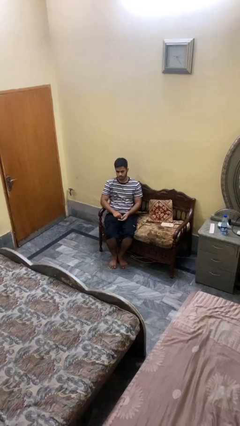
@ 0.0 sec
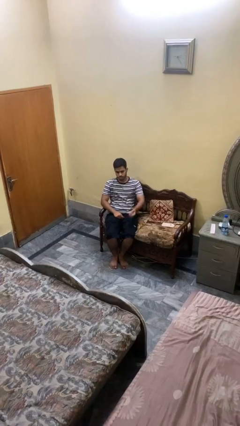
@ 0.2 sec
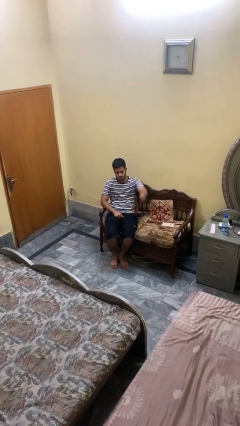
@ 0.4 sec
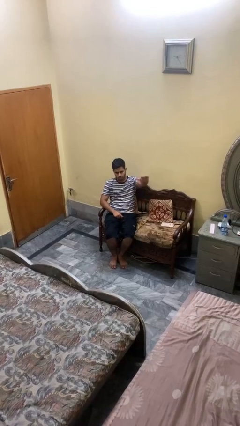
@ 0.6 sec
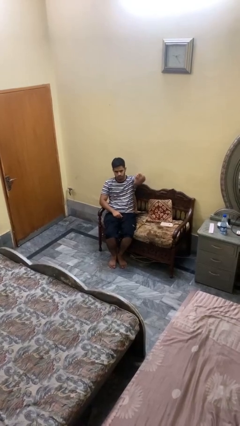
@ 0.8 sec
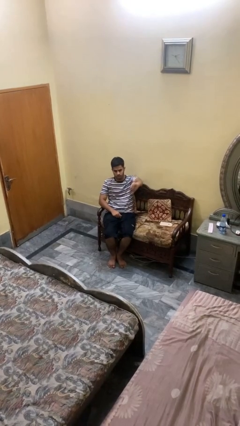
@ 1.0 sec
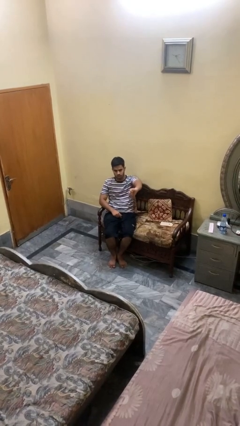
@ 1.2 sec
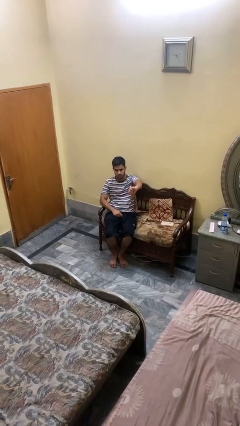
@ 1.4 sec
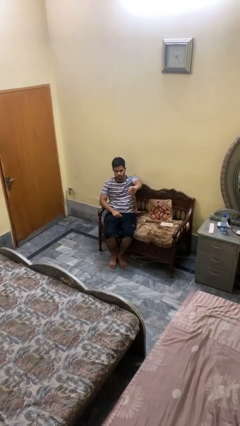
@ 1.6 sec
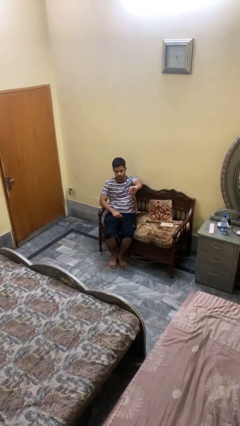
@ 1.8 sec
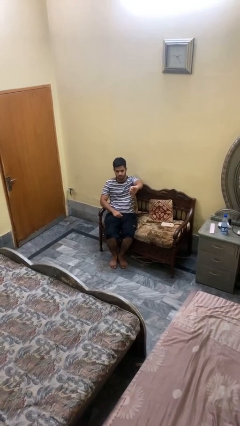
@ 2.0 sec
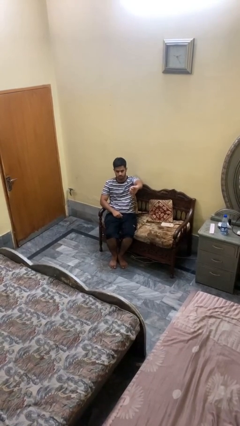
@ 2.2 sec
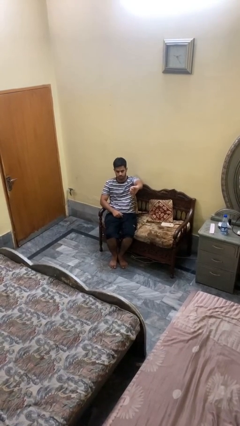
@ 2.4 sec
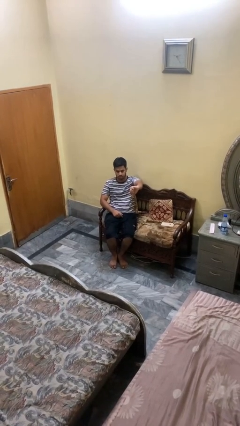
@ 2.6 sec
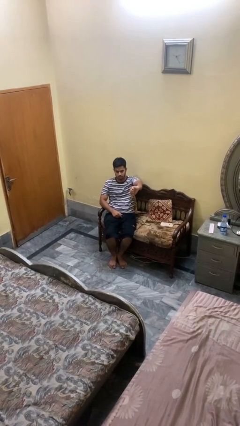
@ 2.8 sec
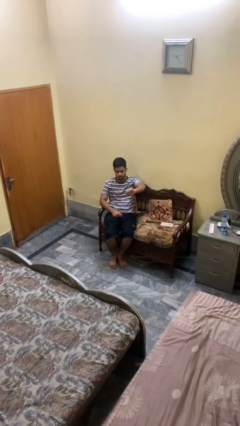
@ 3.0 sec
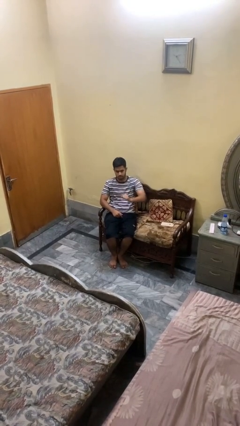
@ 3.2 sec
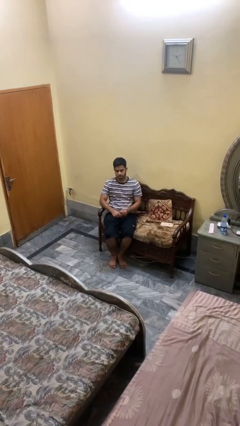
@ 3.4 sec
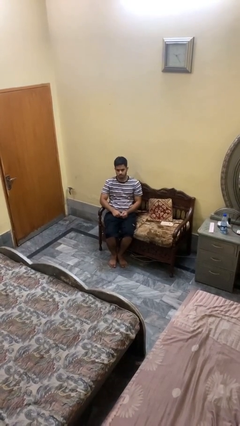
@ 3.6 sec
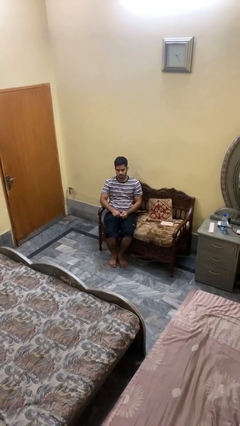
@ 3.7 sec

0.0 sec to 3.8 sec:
person gestures thumbs down

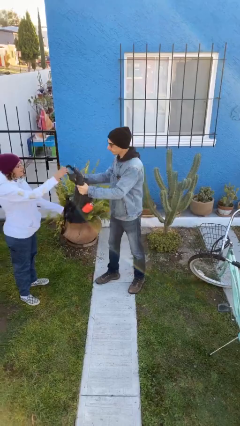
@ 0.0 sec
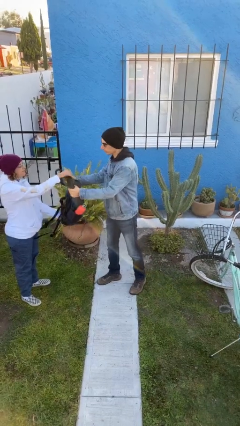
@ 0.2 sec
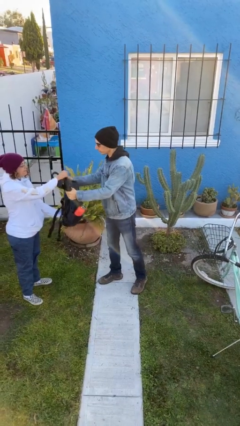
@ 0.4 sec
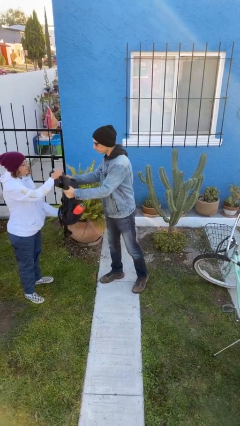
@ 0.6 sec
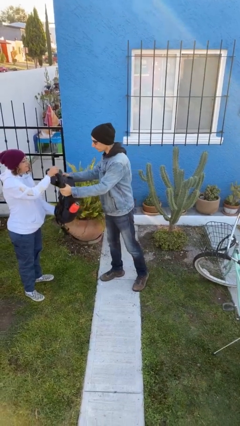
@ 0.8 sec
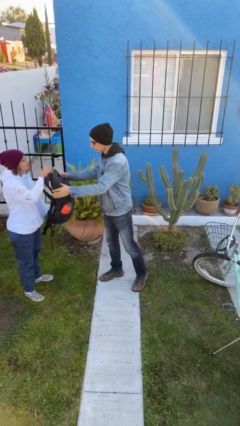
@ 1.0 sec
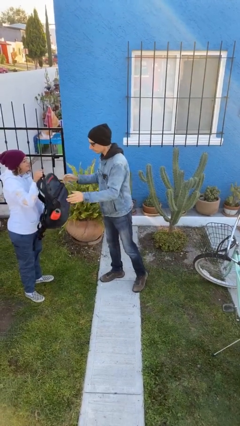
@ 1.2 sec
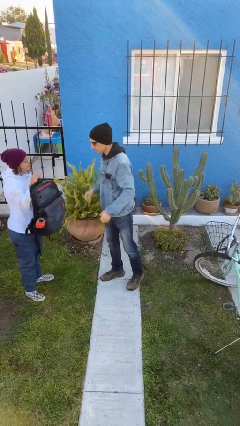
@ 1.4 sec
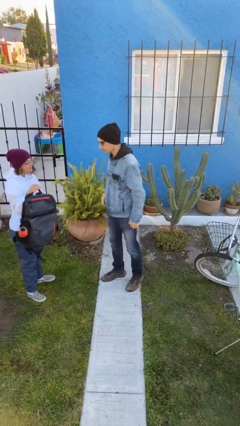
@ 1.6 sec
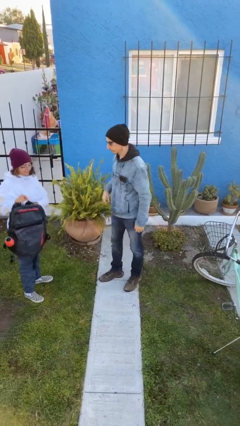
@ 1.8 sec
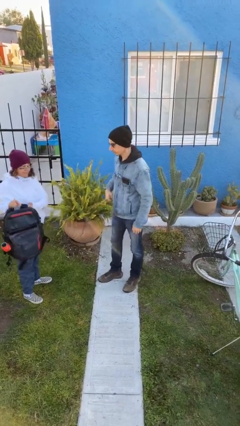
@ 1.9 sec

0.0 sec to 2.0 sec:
person transfers object to person

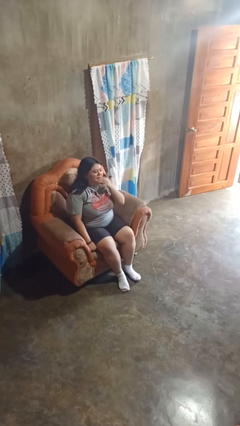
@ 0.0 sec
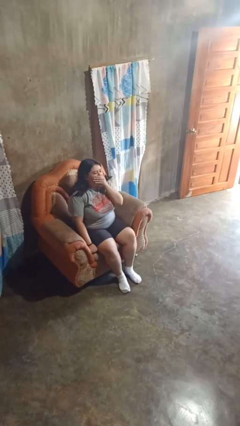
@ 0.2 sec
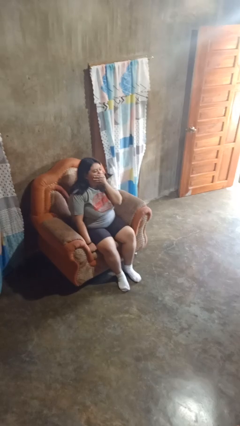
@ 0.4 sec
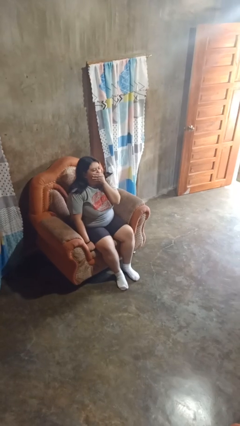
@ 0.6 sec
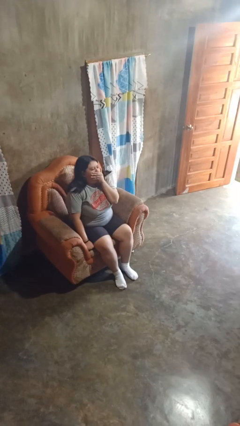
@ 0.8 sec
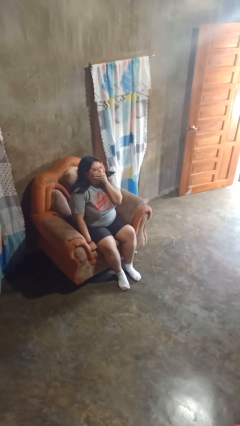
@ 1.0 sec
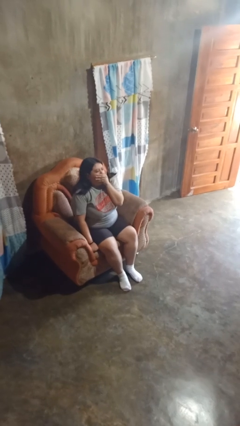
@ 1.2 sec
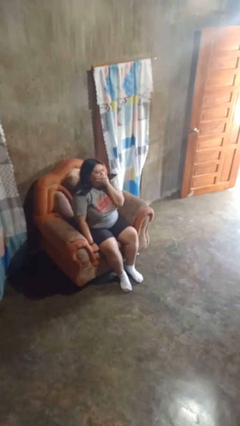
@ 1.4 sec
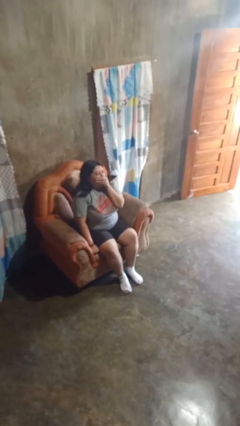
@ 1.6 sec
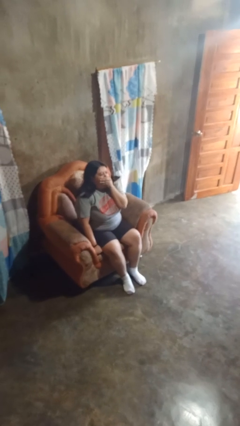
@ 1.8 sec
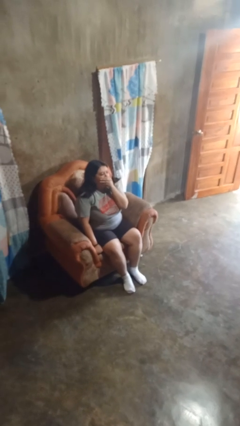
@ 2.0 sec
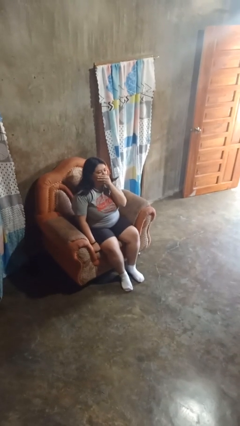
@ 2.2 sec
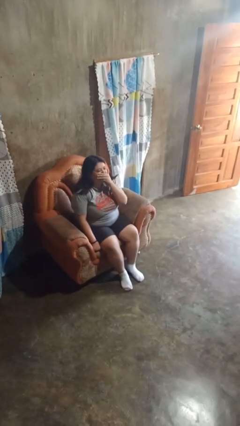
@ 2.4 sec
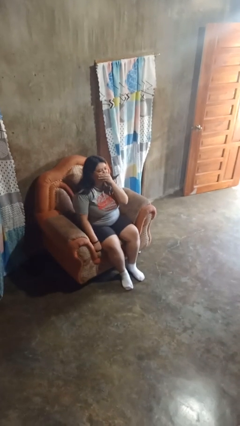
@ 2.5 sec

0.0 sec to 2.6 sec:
person yawns

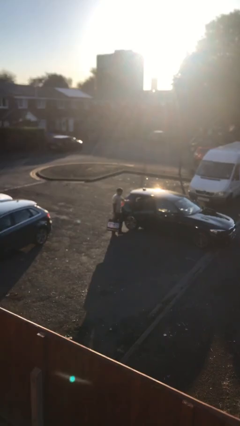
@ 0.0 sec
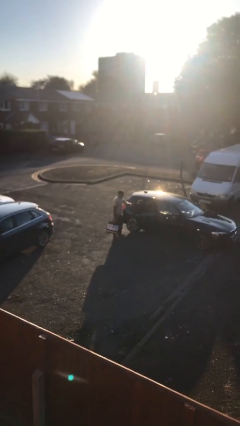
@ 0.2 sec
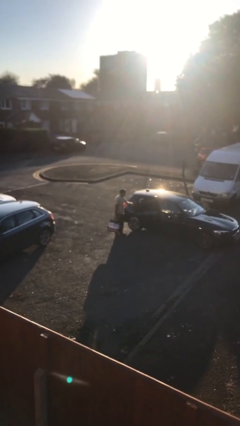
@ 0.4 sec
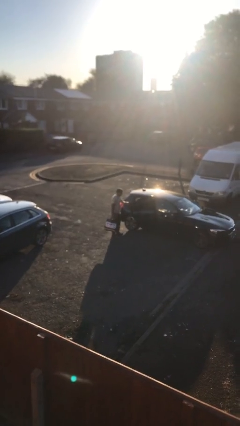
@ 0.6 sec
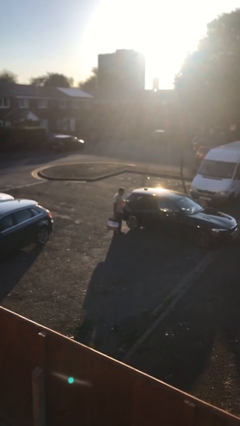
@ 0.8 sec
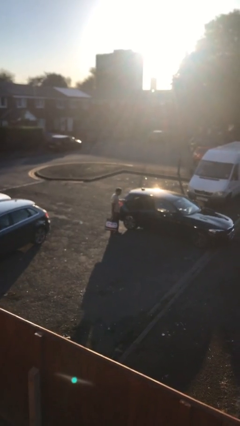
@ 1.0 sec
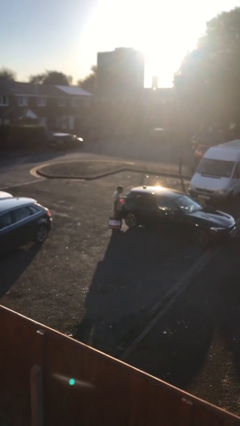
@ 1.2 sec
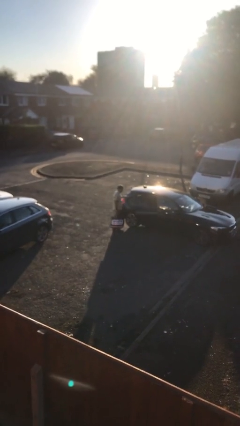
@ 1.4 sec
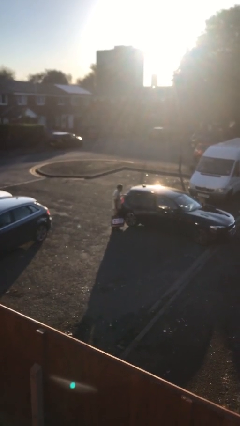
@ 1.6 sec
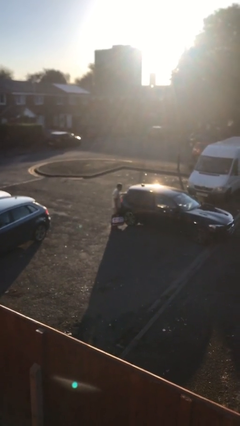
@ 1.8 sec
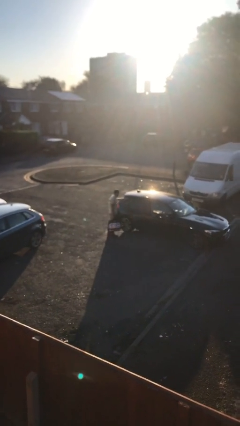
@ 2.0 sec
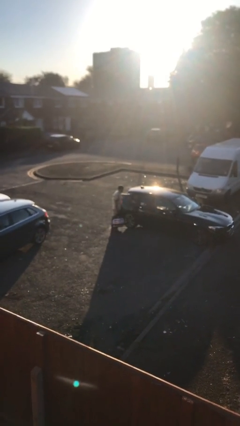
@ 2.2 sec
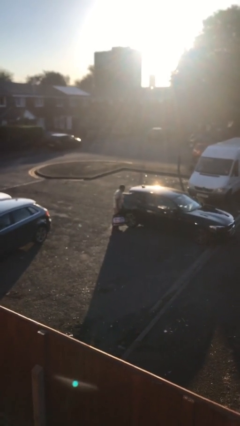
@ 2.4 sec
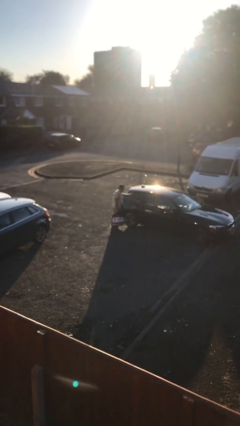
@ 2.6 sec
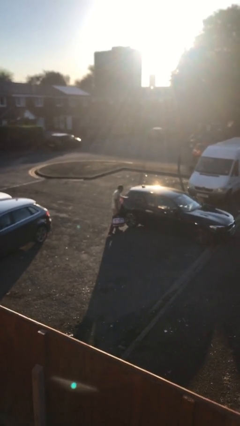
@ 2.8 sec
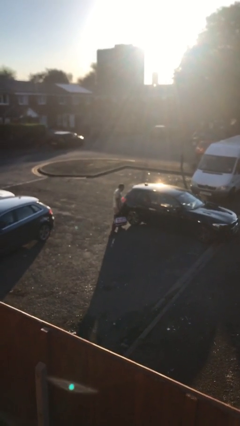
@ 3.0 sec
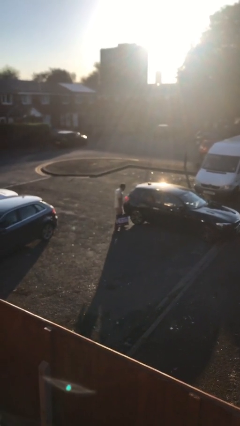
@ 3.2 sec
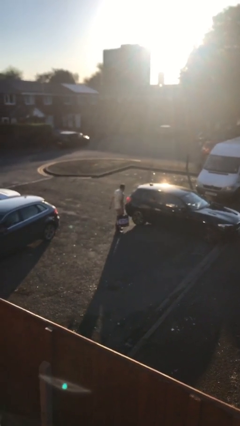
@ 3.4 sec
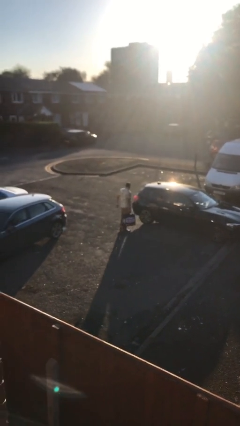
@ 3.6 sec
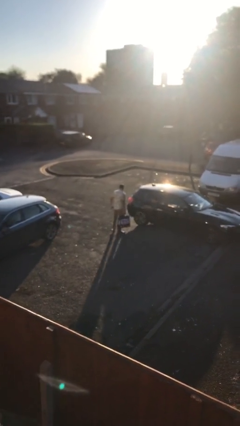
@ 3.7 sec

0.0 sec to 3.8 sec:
person closes car door

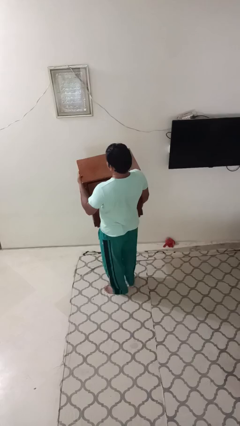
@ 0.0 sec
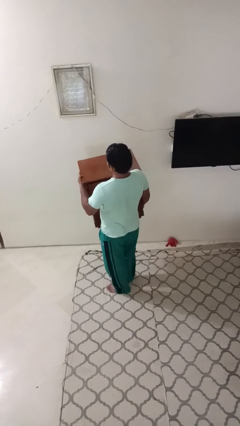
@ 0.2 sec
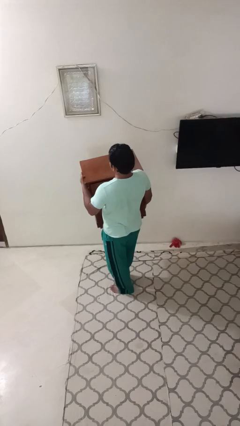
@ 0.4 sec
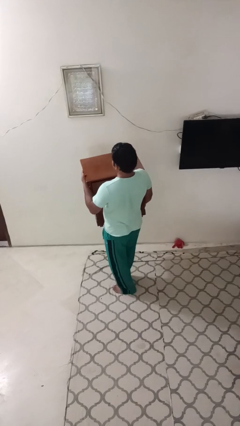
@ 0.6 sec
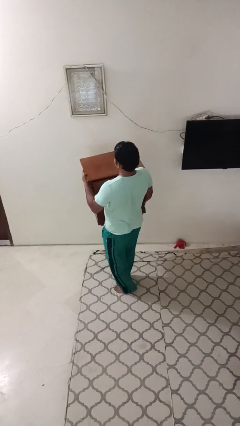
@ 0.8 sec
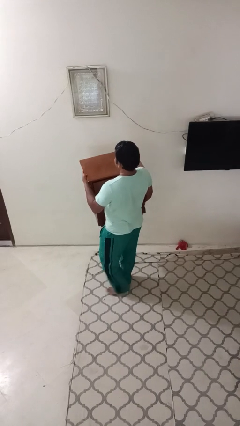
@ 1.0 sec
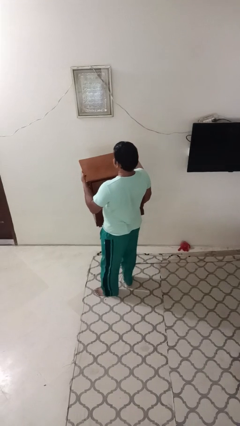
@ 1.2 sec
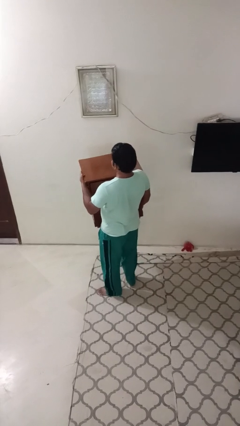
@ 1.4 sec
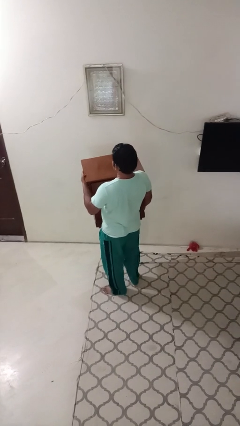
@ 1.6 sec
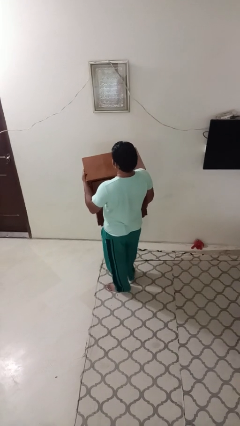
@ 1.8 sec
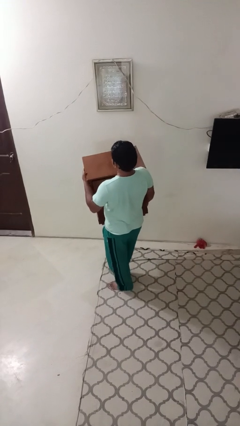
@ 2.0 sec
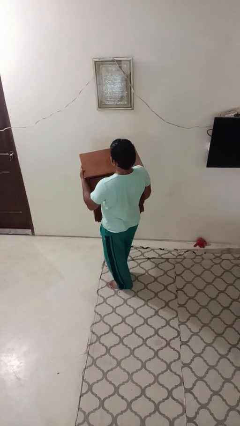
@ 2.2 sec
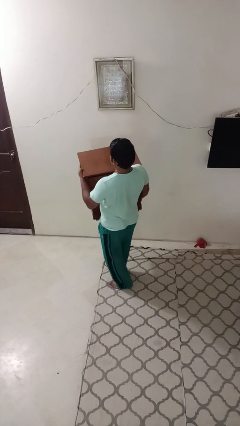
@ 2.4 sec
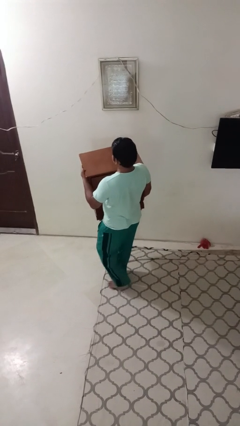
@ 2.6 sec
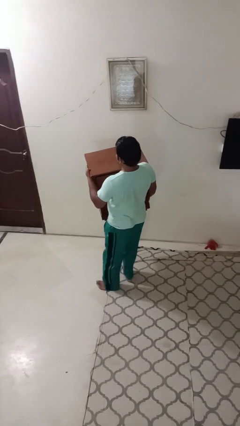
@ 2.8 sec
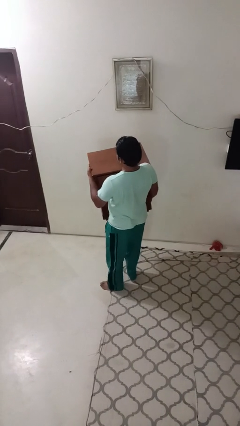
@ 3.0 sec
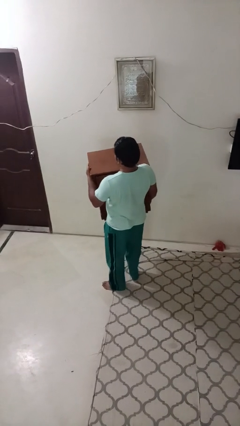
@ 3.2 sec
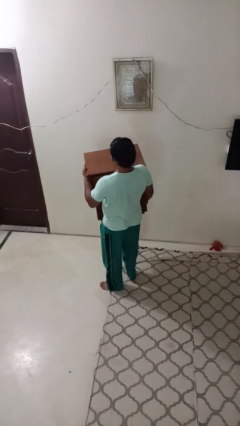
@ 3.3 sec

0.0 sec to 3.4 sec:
person carries furniture

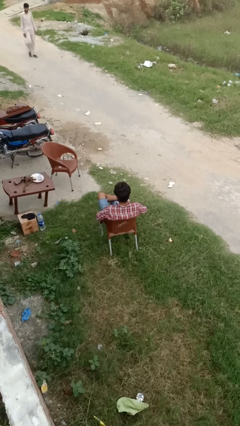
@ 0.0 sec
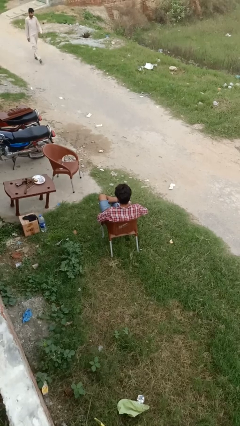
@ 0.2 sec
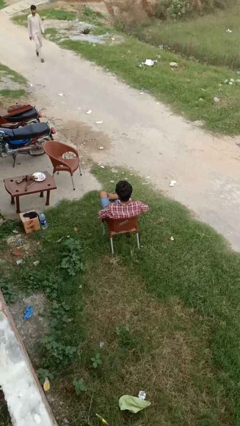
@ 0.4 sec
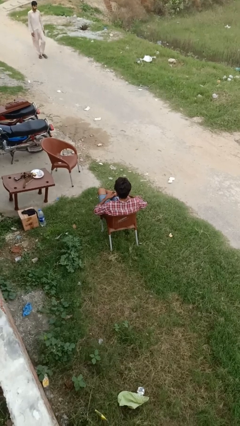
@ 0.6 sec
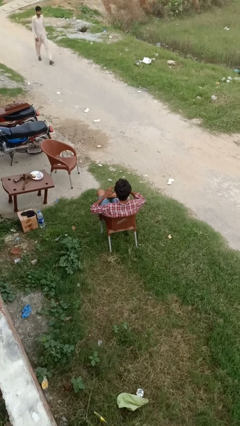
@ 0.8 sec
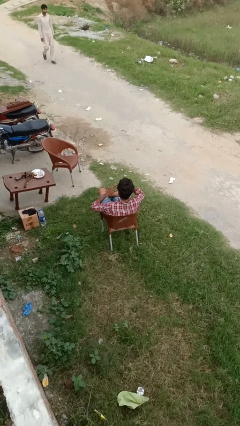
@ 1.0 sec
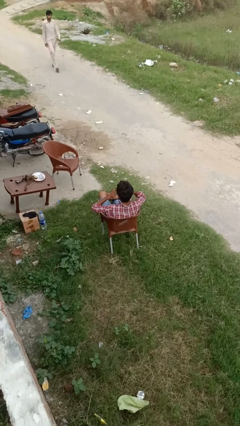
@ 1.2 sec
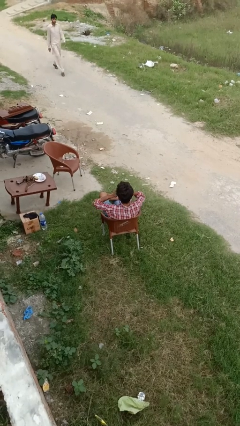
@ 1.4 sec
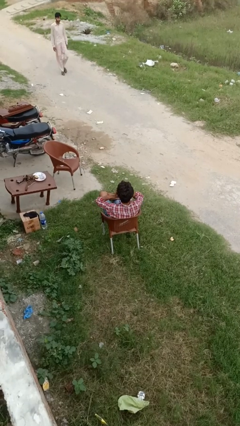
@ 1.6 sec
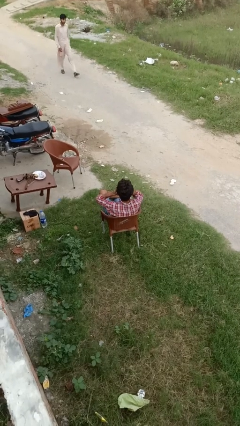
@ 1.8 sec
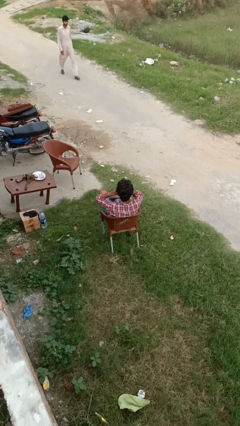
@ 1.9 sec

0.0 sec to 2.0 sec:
person applies sunscreen
